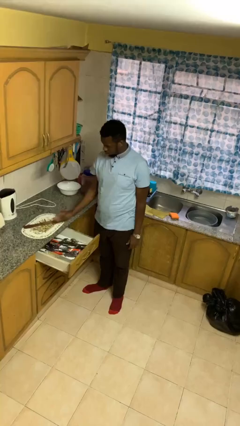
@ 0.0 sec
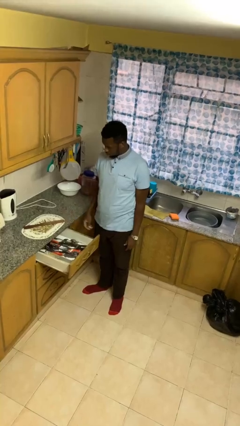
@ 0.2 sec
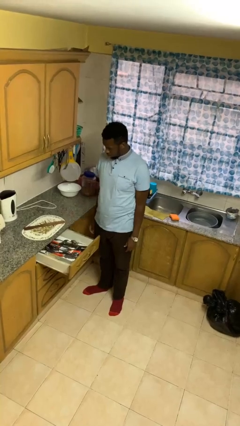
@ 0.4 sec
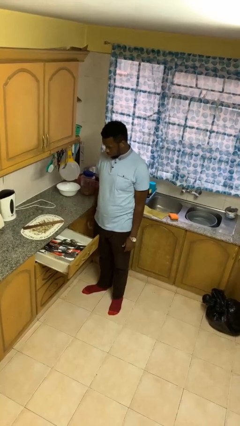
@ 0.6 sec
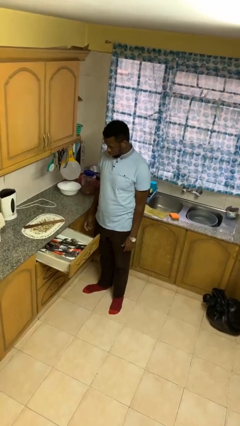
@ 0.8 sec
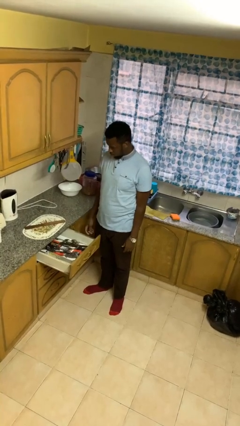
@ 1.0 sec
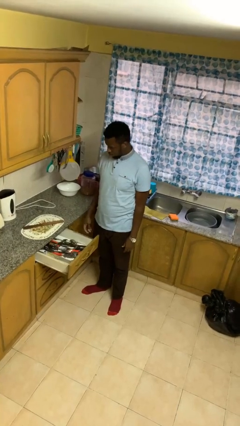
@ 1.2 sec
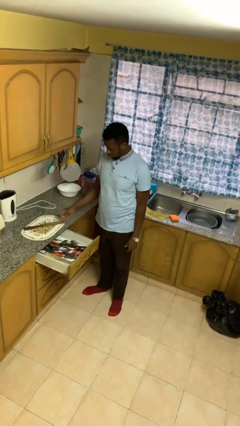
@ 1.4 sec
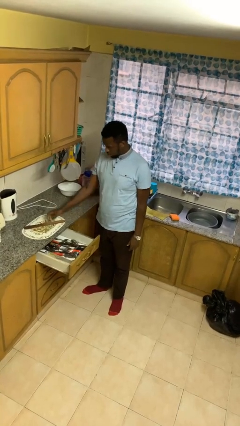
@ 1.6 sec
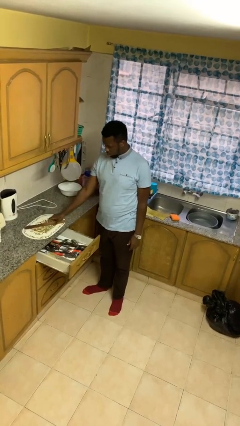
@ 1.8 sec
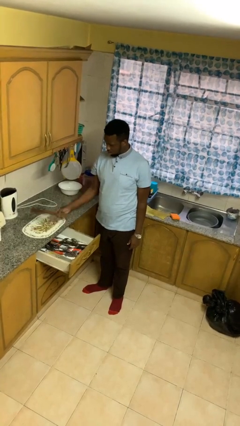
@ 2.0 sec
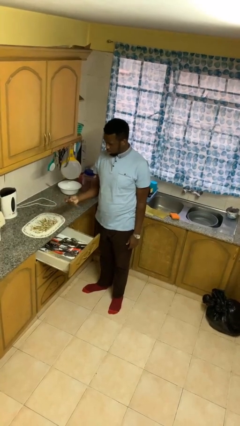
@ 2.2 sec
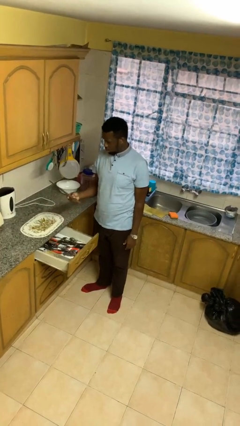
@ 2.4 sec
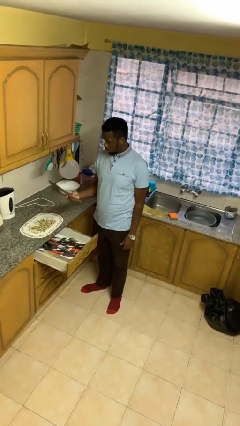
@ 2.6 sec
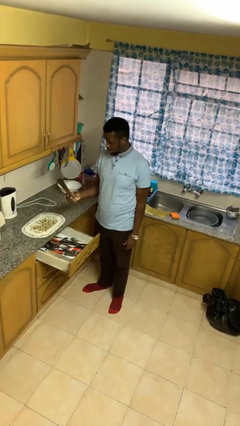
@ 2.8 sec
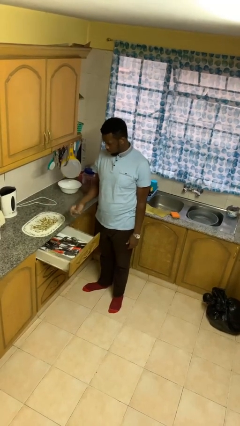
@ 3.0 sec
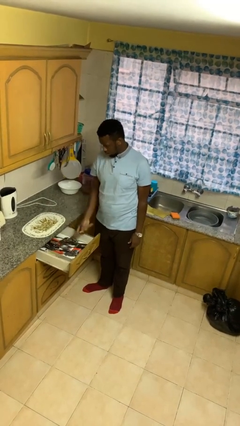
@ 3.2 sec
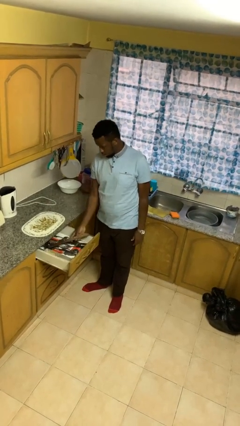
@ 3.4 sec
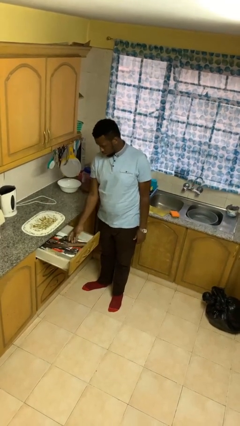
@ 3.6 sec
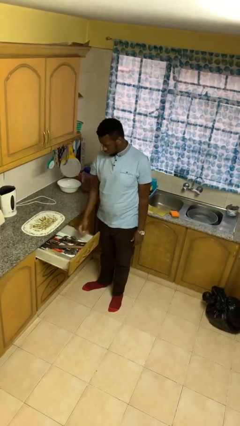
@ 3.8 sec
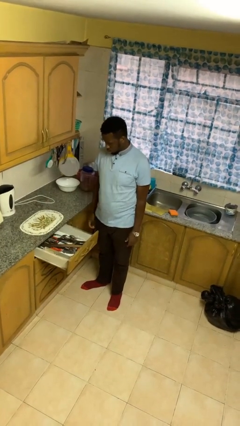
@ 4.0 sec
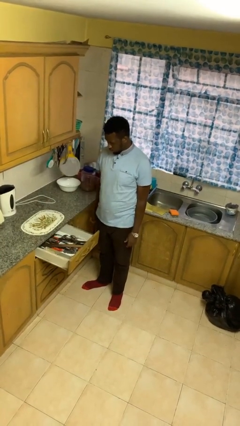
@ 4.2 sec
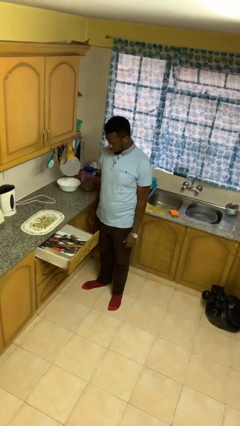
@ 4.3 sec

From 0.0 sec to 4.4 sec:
person puts object into kitchen drawer

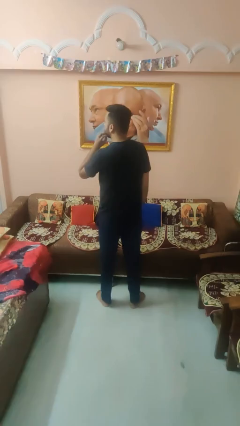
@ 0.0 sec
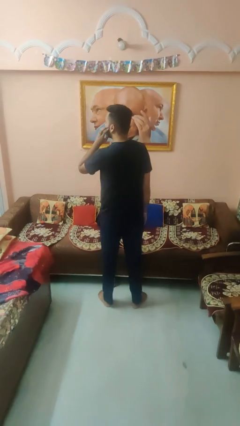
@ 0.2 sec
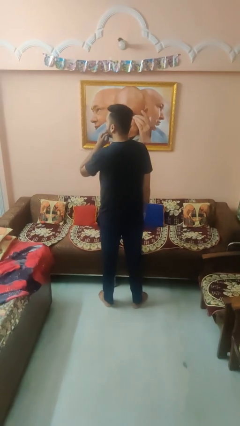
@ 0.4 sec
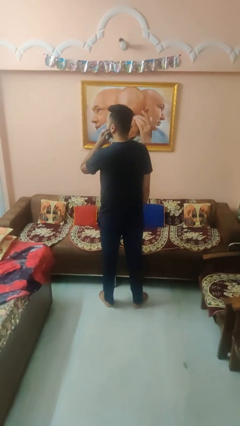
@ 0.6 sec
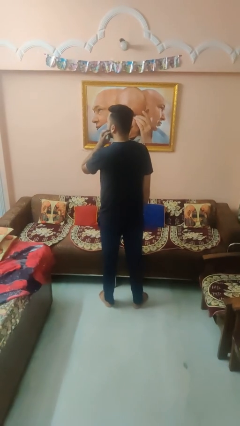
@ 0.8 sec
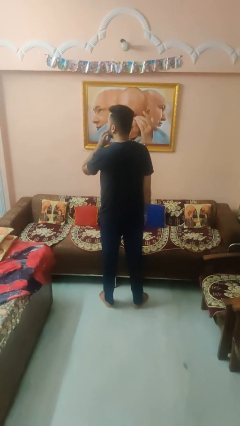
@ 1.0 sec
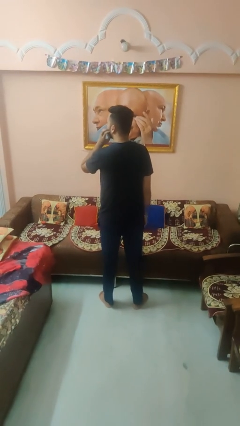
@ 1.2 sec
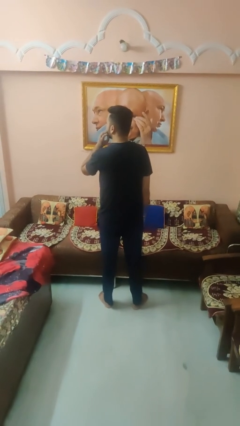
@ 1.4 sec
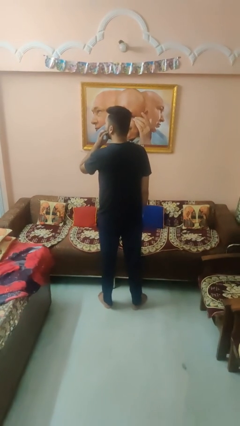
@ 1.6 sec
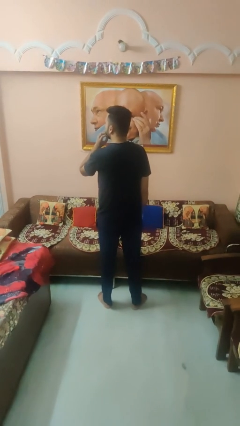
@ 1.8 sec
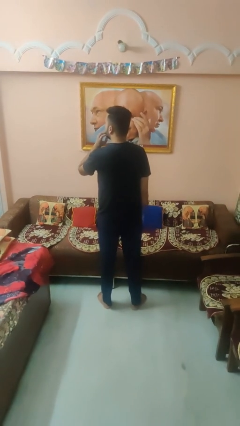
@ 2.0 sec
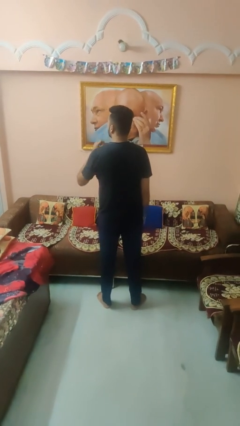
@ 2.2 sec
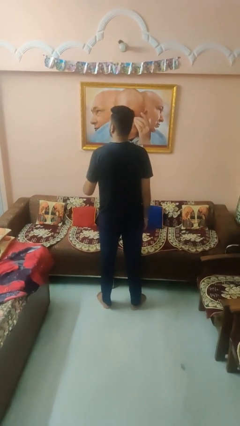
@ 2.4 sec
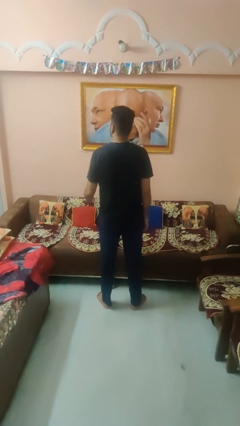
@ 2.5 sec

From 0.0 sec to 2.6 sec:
person scratches face

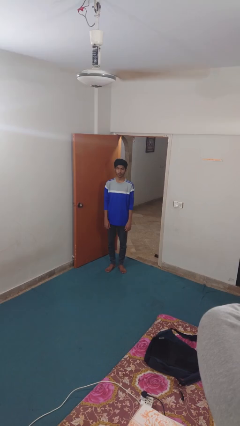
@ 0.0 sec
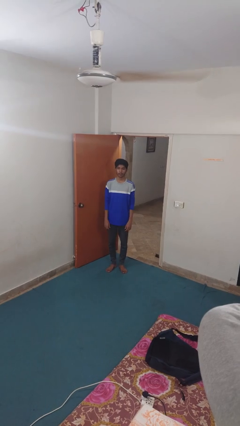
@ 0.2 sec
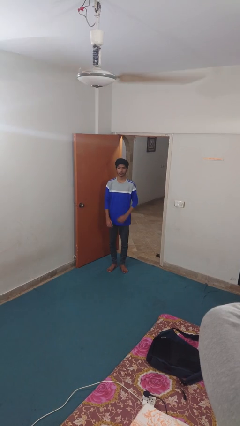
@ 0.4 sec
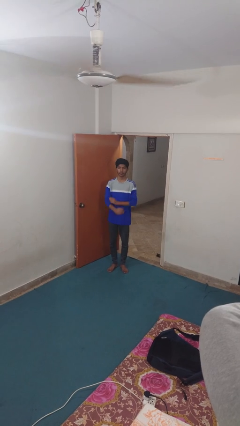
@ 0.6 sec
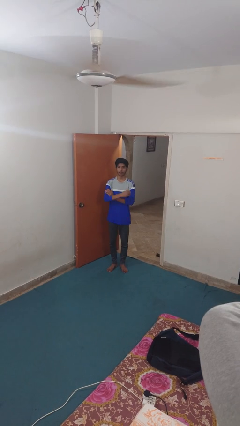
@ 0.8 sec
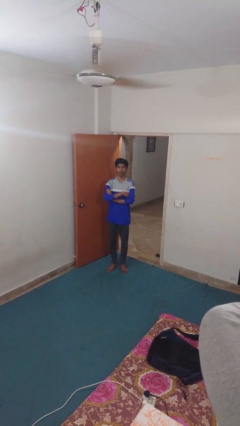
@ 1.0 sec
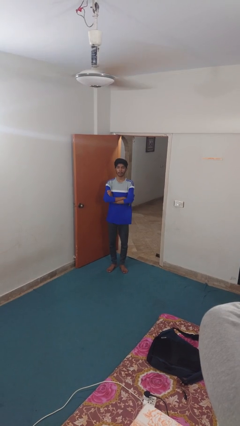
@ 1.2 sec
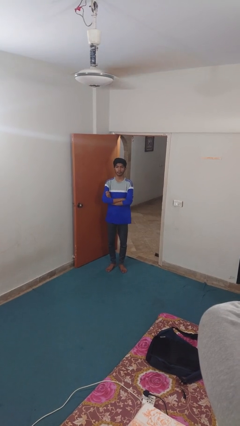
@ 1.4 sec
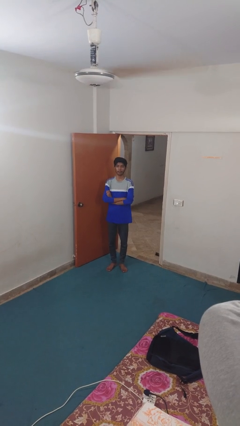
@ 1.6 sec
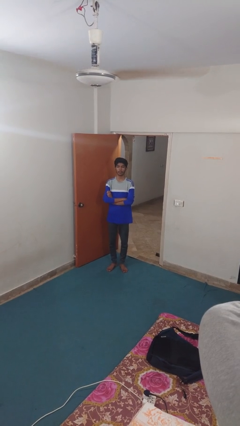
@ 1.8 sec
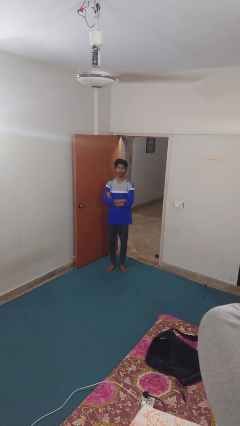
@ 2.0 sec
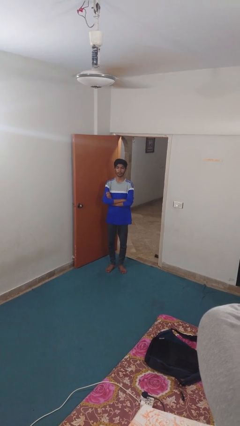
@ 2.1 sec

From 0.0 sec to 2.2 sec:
person crosses arms

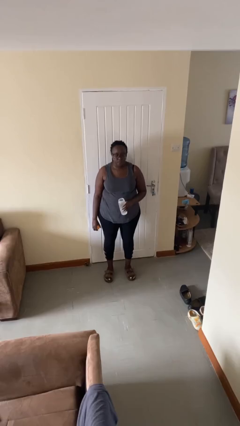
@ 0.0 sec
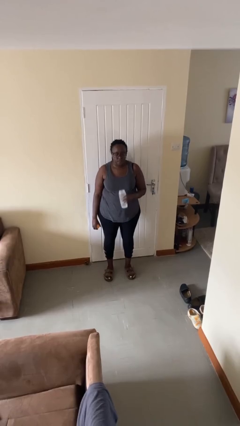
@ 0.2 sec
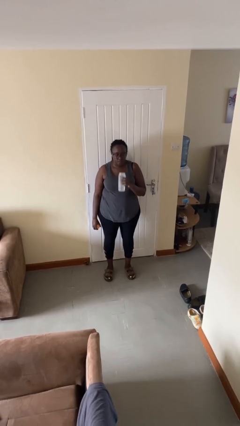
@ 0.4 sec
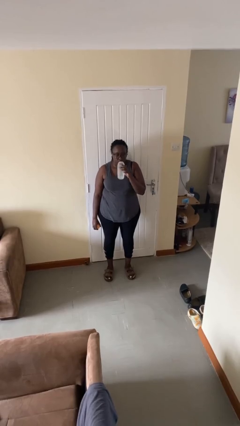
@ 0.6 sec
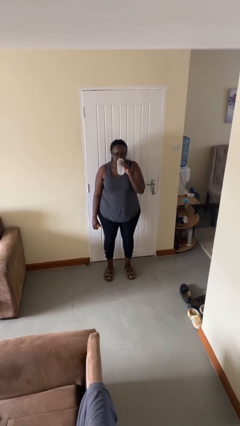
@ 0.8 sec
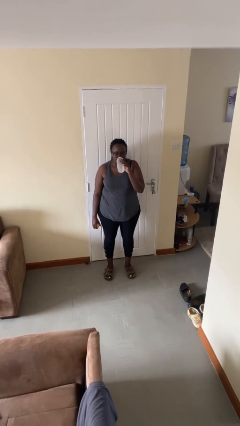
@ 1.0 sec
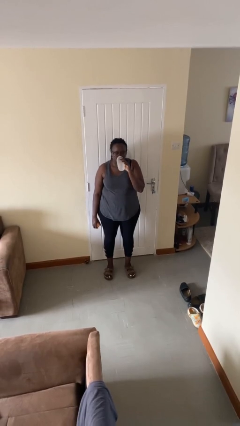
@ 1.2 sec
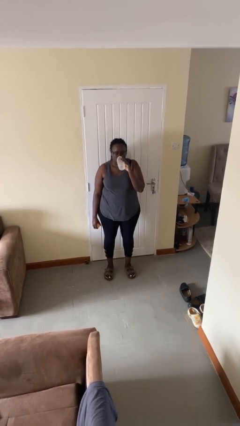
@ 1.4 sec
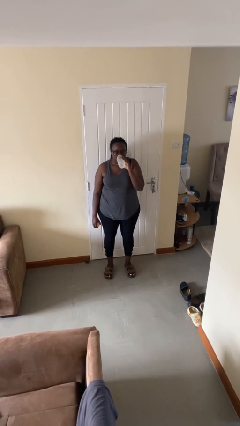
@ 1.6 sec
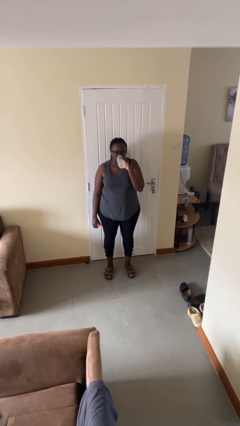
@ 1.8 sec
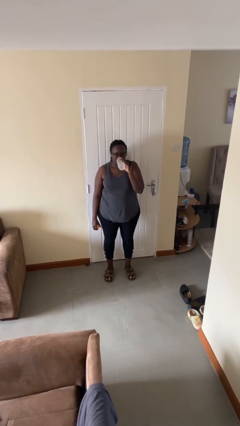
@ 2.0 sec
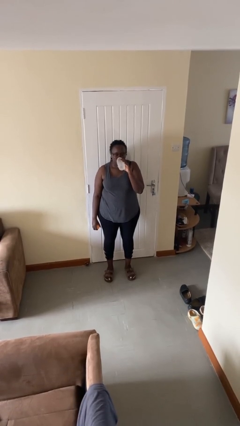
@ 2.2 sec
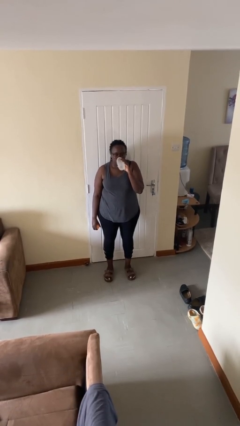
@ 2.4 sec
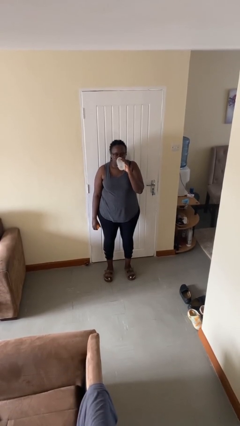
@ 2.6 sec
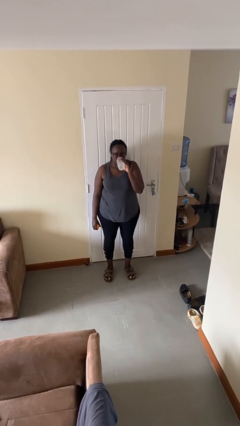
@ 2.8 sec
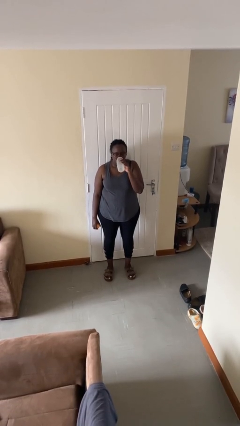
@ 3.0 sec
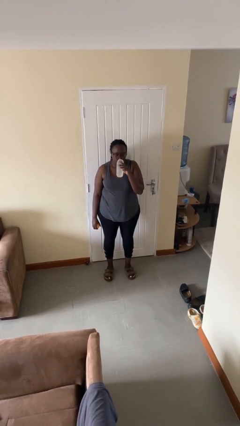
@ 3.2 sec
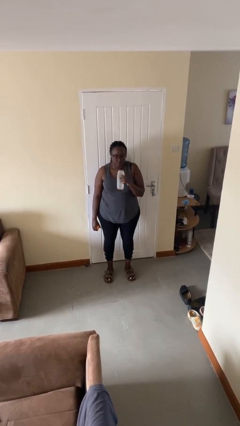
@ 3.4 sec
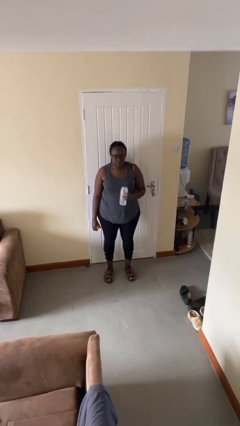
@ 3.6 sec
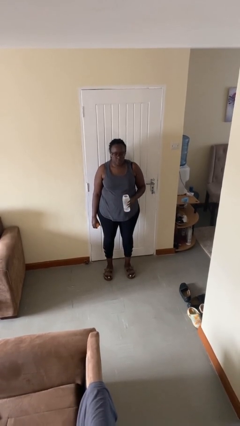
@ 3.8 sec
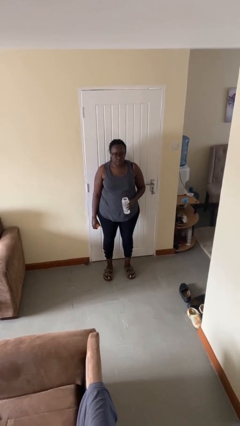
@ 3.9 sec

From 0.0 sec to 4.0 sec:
person drinks from bottle

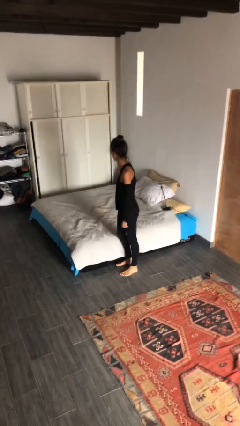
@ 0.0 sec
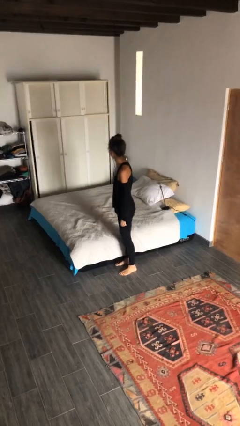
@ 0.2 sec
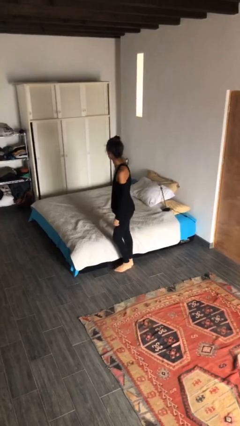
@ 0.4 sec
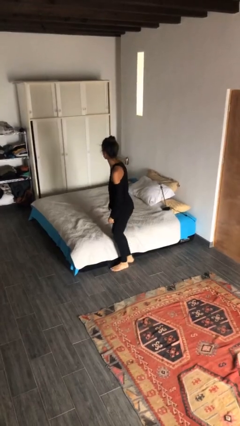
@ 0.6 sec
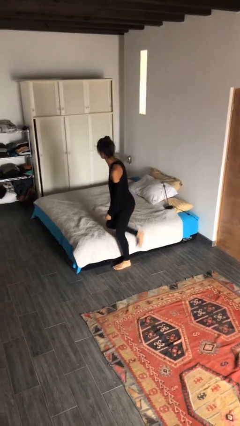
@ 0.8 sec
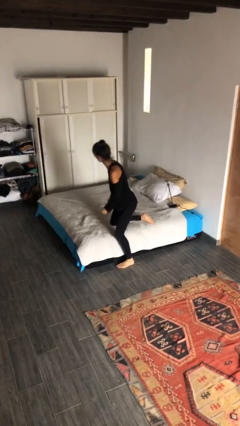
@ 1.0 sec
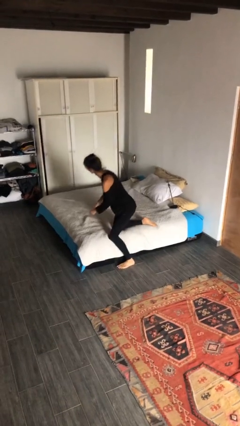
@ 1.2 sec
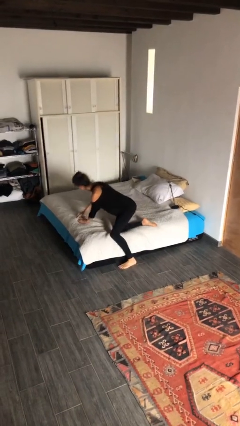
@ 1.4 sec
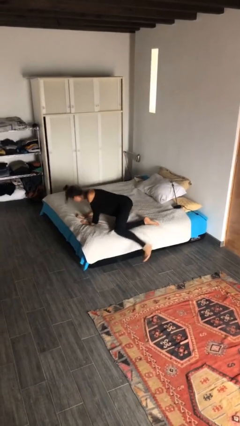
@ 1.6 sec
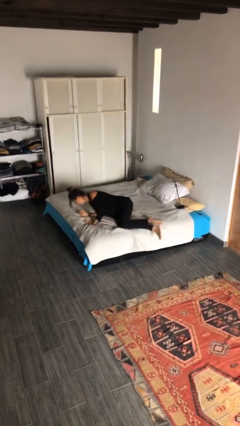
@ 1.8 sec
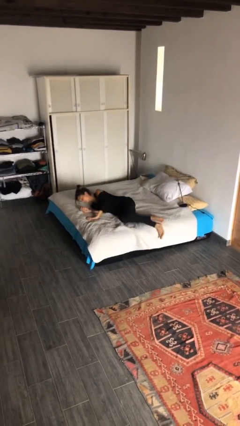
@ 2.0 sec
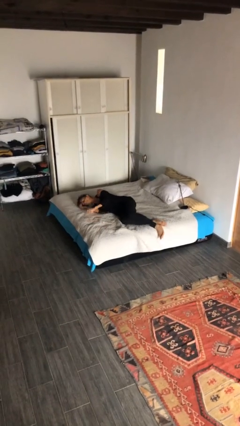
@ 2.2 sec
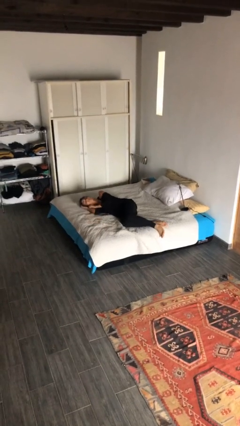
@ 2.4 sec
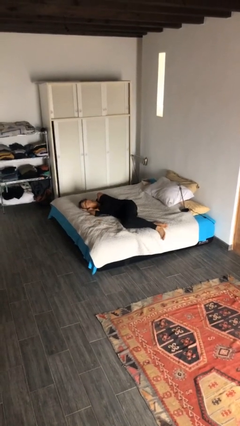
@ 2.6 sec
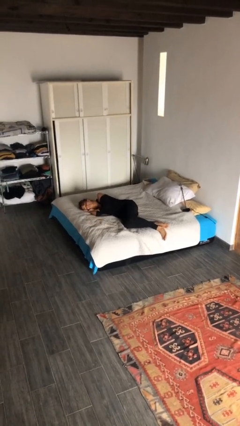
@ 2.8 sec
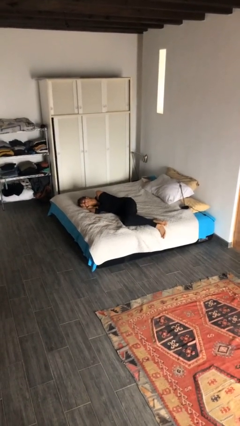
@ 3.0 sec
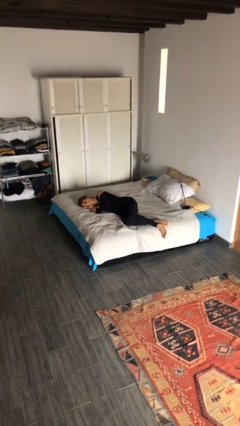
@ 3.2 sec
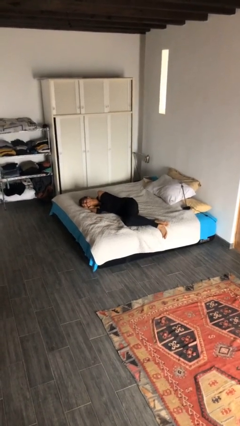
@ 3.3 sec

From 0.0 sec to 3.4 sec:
person lies down on bed

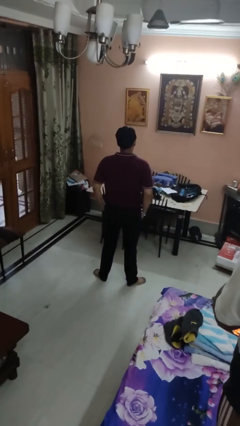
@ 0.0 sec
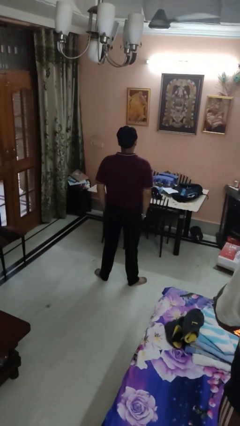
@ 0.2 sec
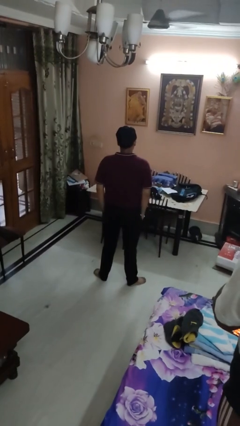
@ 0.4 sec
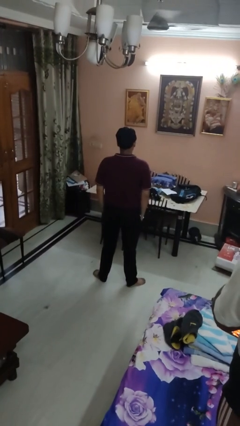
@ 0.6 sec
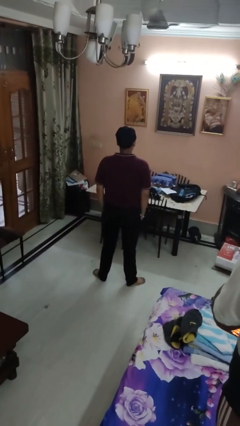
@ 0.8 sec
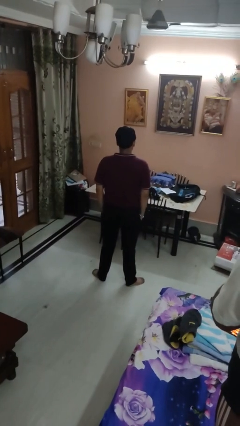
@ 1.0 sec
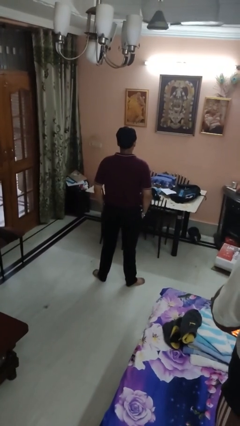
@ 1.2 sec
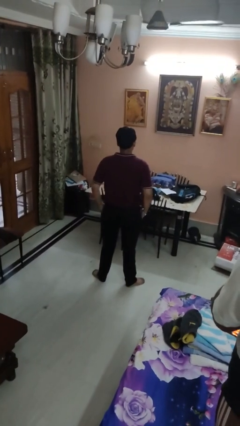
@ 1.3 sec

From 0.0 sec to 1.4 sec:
person puts hands in back pockets
